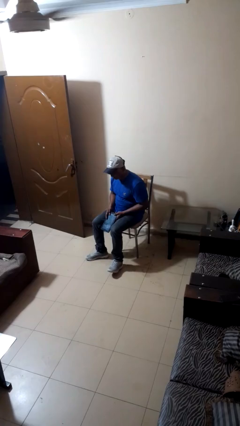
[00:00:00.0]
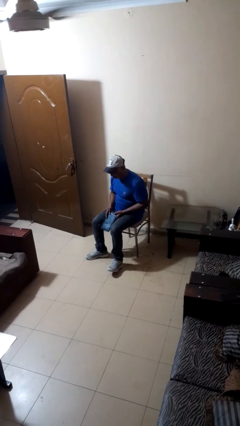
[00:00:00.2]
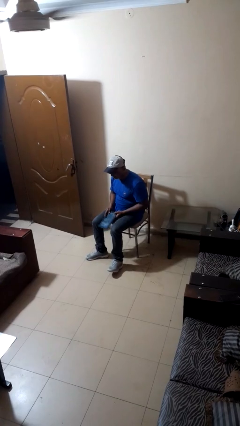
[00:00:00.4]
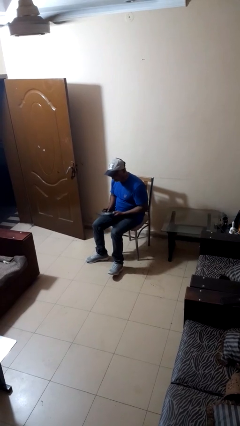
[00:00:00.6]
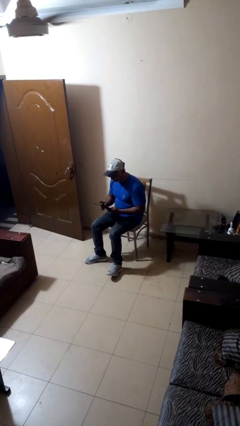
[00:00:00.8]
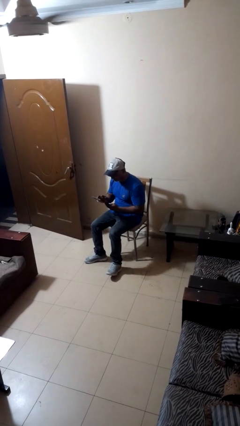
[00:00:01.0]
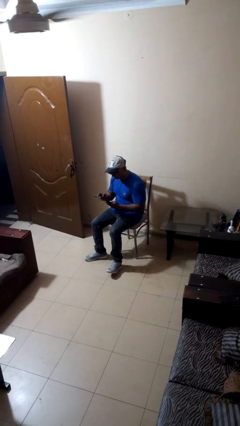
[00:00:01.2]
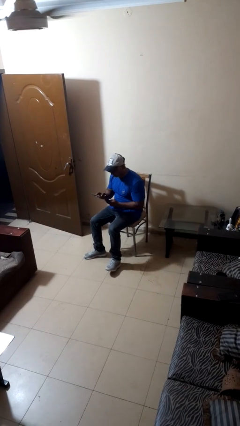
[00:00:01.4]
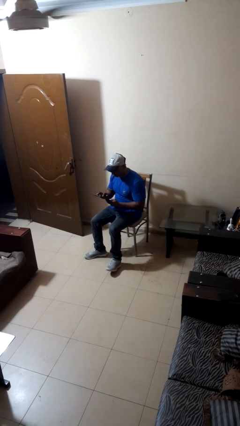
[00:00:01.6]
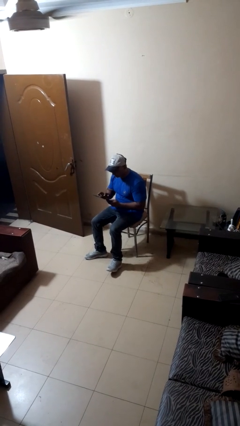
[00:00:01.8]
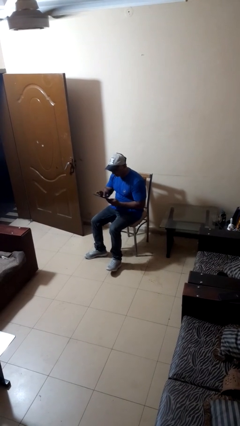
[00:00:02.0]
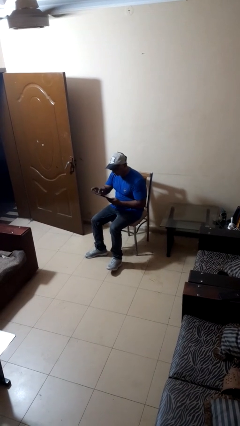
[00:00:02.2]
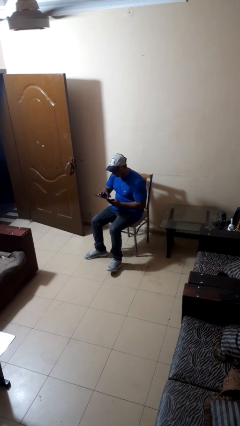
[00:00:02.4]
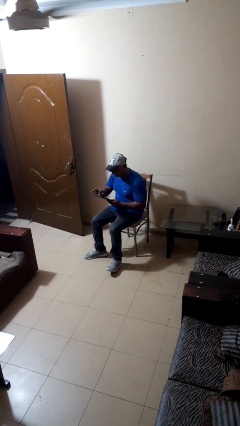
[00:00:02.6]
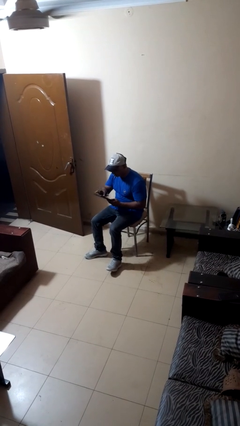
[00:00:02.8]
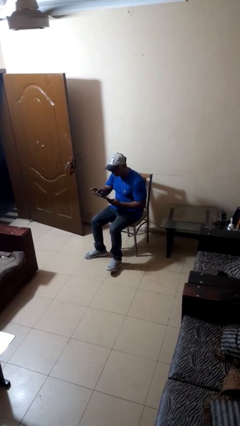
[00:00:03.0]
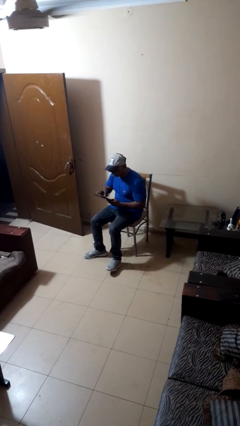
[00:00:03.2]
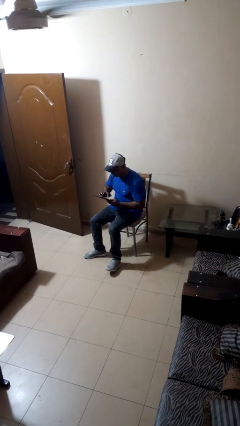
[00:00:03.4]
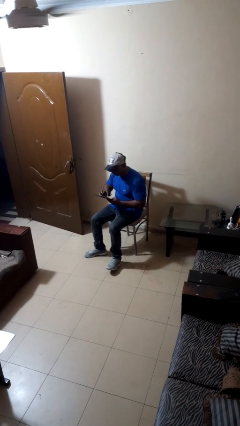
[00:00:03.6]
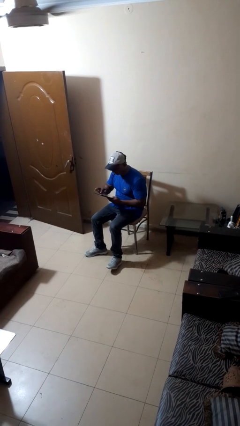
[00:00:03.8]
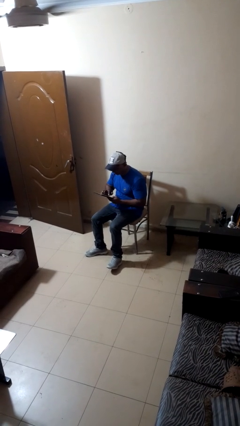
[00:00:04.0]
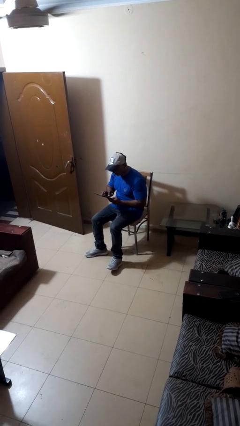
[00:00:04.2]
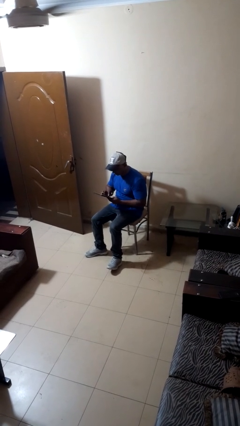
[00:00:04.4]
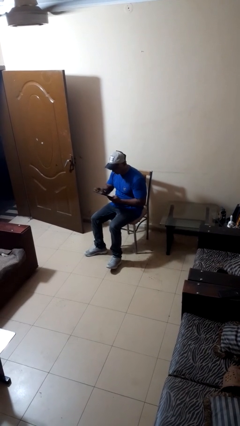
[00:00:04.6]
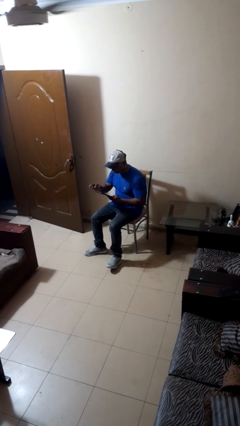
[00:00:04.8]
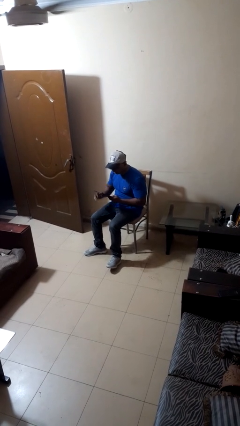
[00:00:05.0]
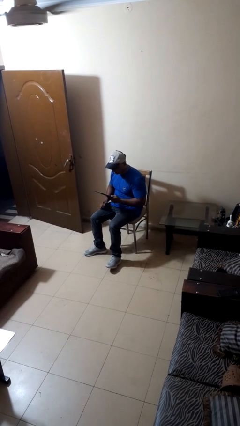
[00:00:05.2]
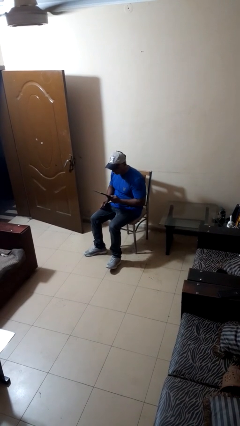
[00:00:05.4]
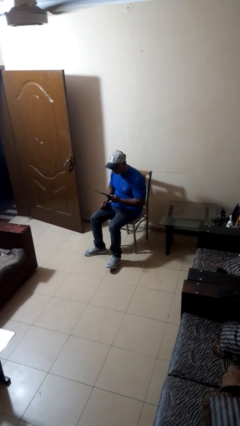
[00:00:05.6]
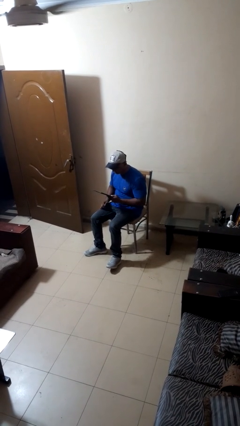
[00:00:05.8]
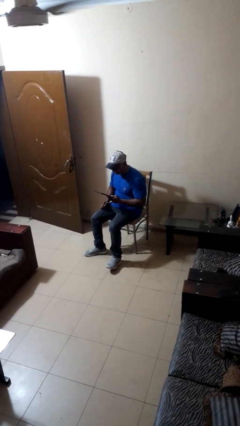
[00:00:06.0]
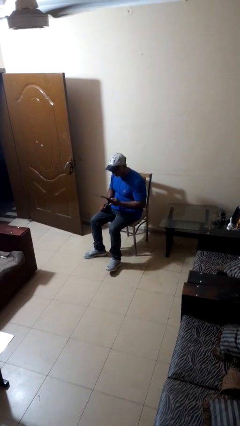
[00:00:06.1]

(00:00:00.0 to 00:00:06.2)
person interacts with tablet

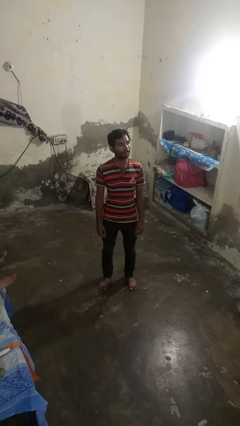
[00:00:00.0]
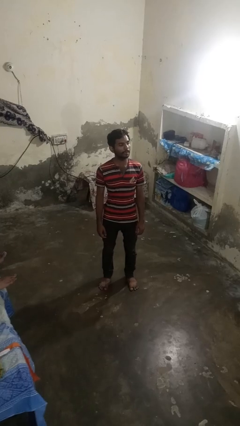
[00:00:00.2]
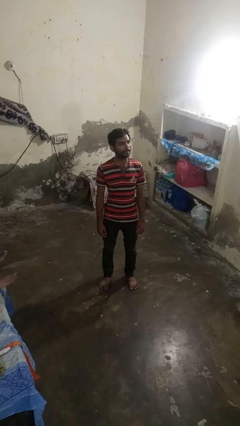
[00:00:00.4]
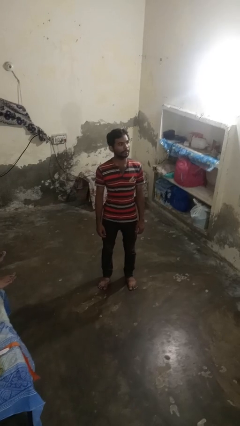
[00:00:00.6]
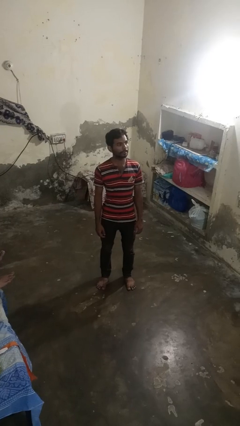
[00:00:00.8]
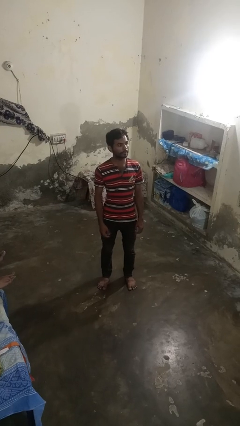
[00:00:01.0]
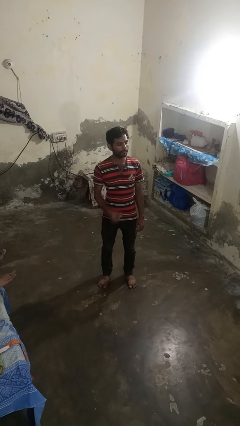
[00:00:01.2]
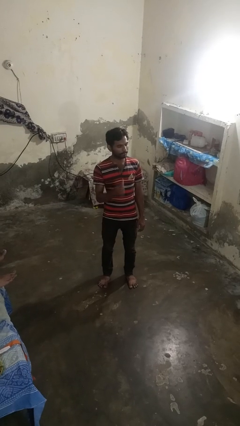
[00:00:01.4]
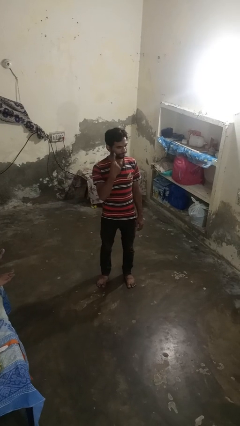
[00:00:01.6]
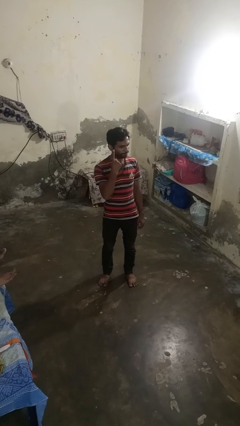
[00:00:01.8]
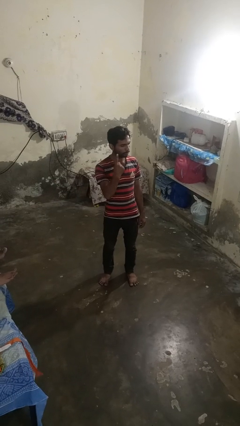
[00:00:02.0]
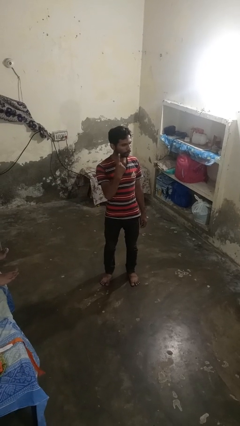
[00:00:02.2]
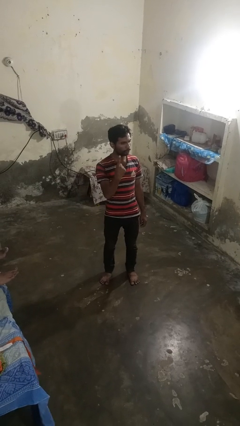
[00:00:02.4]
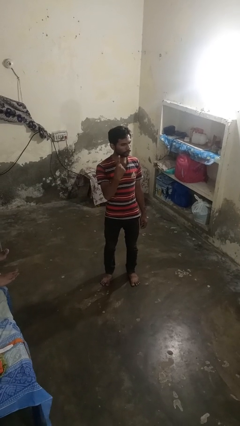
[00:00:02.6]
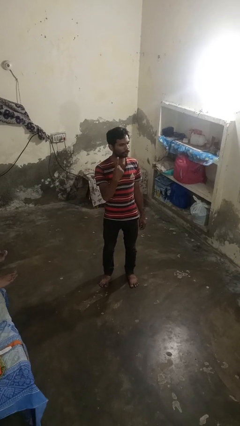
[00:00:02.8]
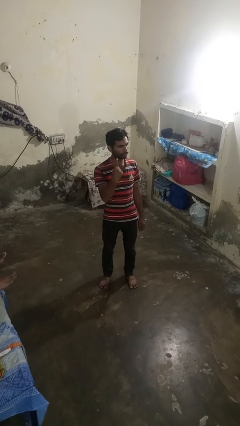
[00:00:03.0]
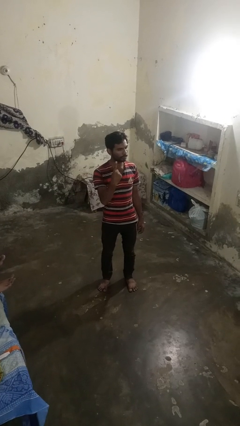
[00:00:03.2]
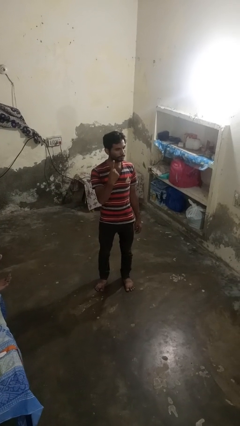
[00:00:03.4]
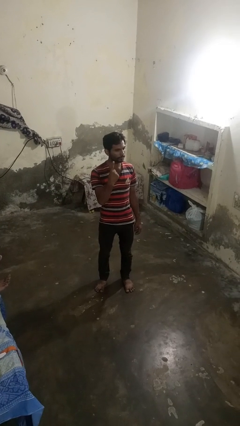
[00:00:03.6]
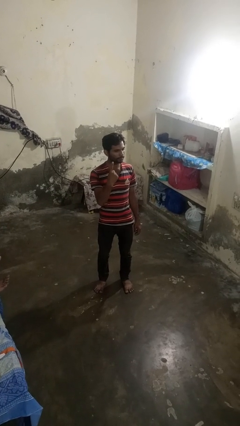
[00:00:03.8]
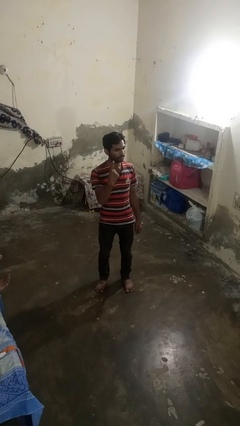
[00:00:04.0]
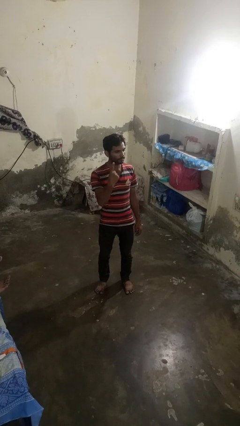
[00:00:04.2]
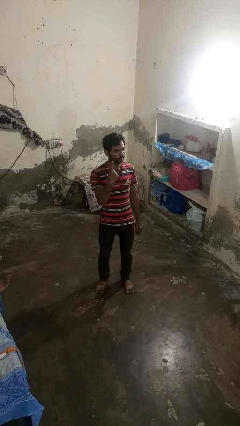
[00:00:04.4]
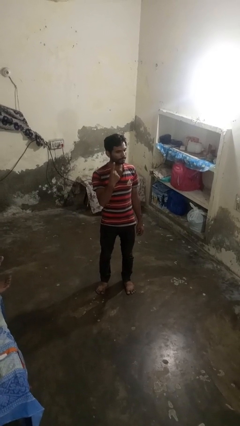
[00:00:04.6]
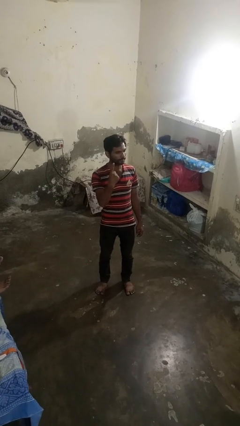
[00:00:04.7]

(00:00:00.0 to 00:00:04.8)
person gestures number one

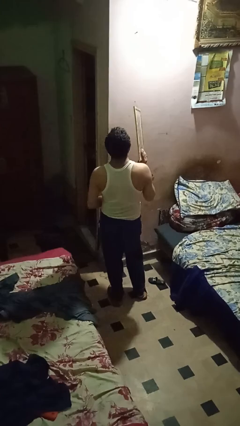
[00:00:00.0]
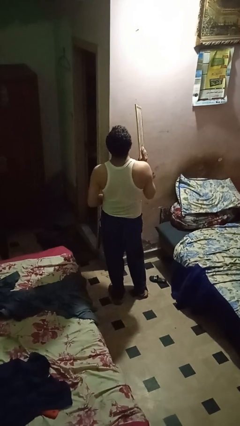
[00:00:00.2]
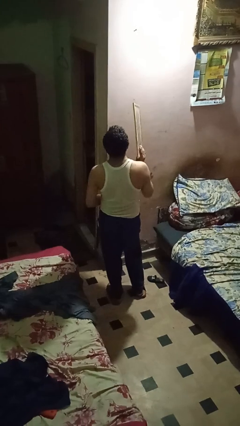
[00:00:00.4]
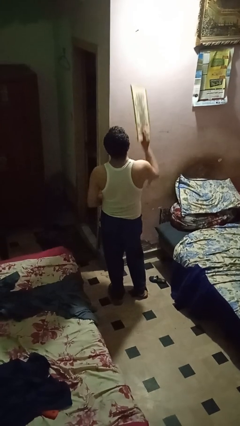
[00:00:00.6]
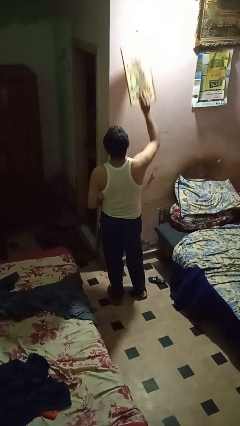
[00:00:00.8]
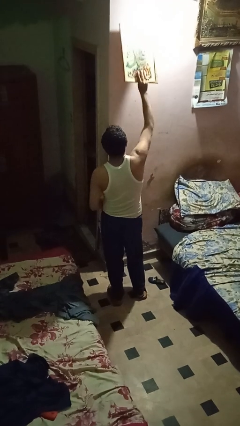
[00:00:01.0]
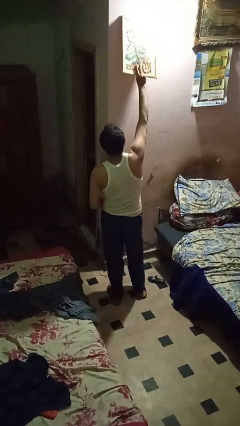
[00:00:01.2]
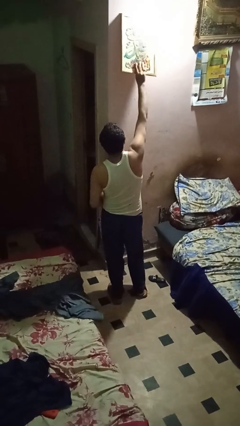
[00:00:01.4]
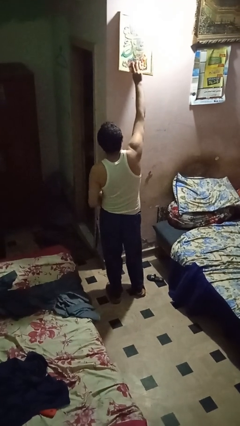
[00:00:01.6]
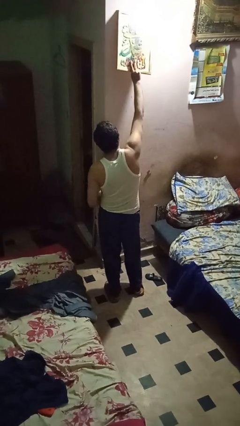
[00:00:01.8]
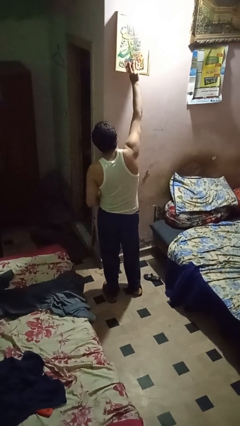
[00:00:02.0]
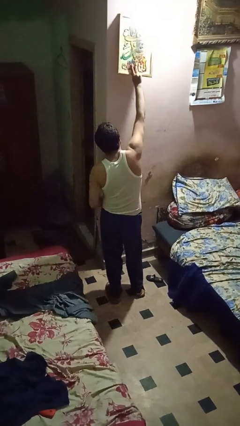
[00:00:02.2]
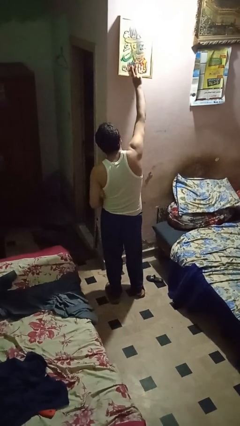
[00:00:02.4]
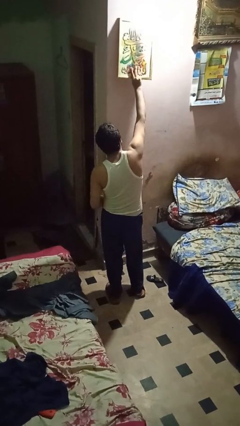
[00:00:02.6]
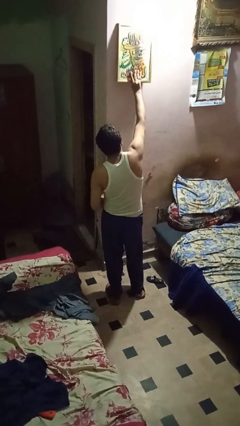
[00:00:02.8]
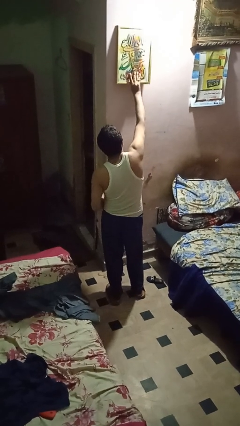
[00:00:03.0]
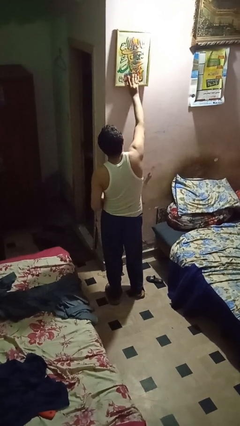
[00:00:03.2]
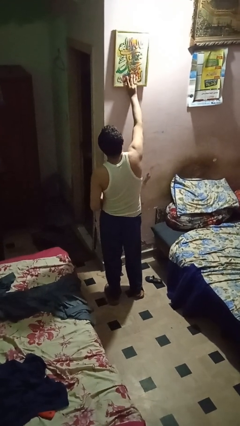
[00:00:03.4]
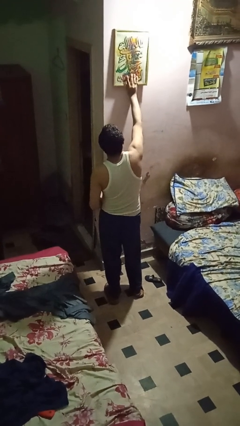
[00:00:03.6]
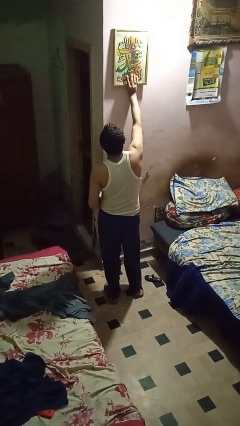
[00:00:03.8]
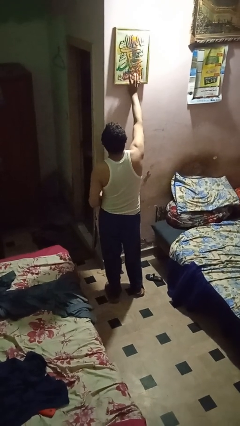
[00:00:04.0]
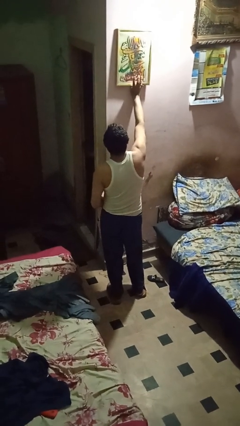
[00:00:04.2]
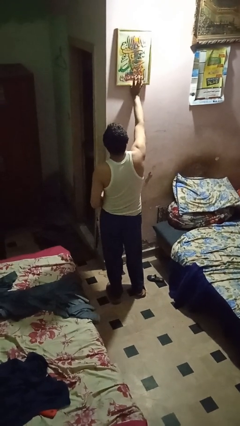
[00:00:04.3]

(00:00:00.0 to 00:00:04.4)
person puts up picture frame

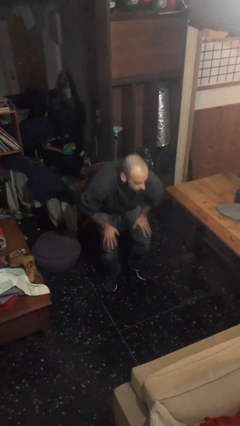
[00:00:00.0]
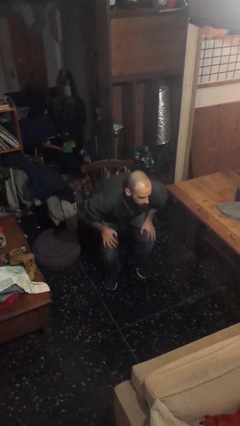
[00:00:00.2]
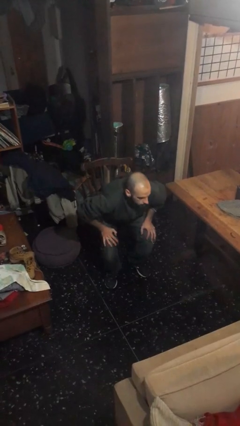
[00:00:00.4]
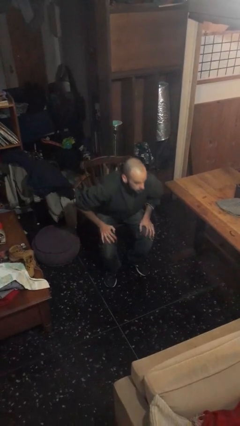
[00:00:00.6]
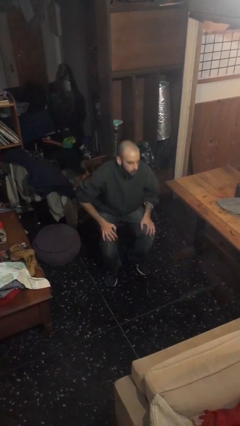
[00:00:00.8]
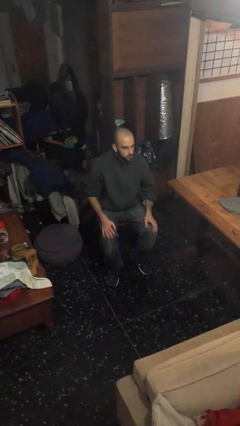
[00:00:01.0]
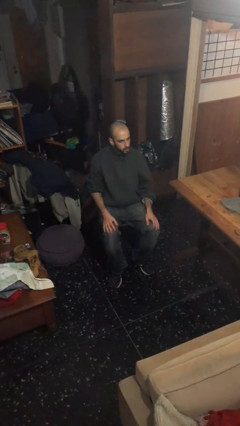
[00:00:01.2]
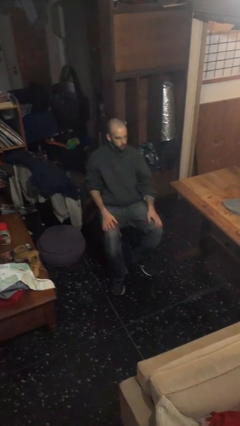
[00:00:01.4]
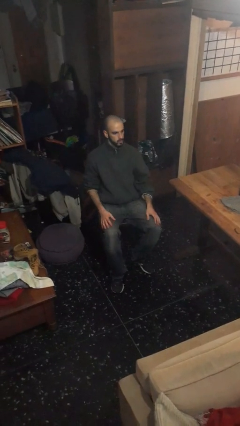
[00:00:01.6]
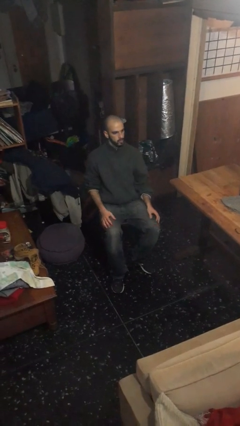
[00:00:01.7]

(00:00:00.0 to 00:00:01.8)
person sits down
